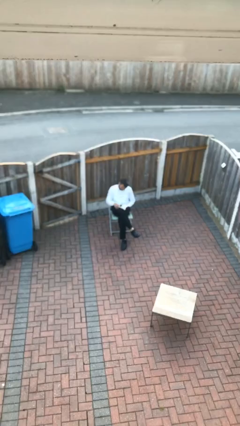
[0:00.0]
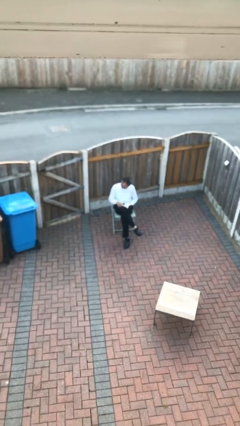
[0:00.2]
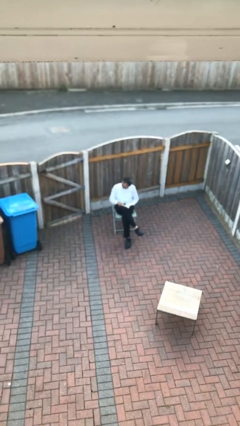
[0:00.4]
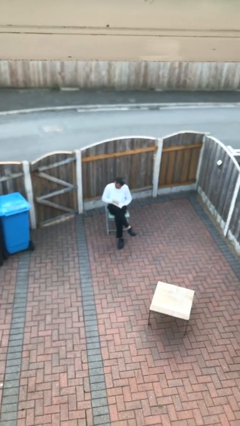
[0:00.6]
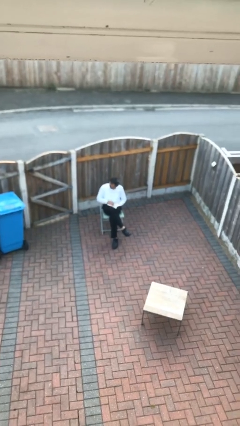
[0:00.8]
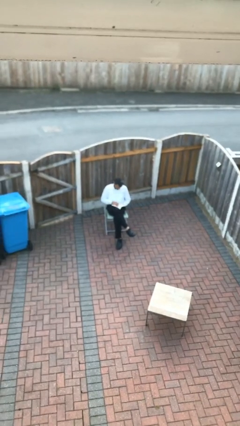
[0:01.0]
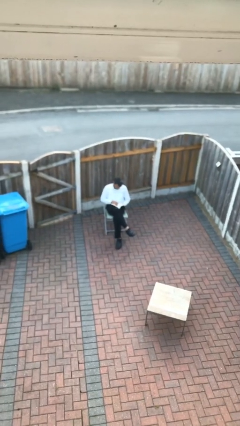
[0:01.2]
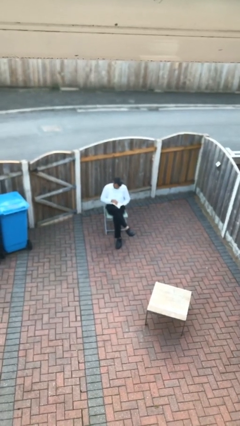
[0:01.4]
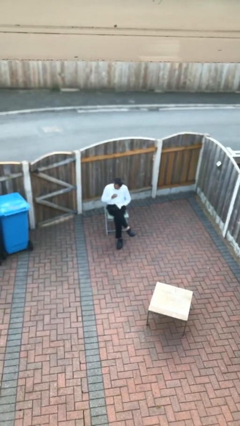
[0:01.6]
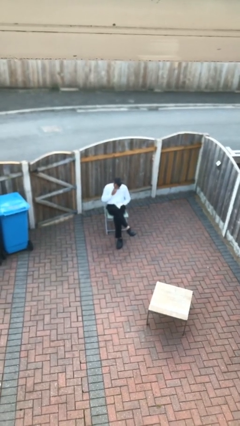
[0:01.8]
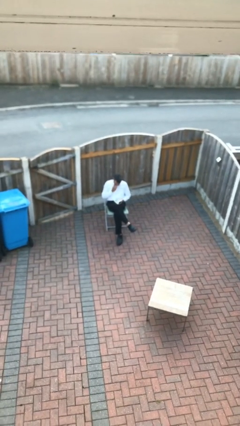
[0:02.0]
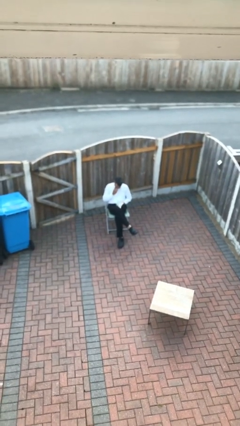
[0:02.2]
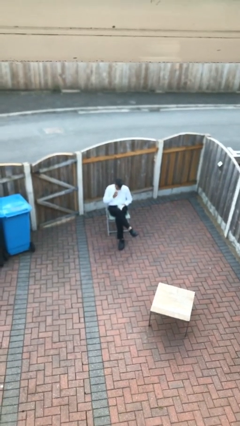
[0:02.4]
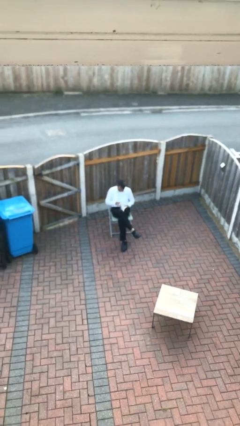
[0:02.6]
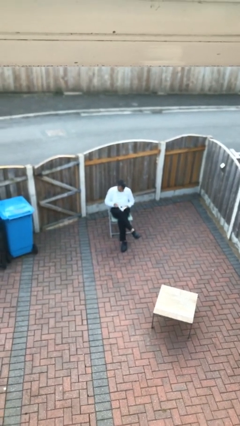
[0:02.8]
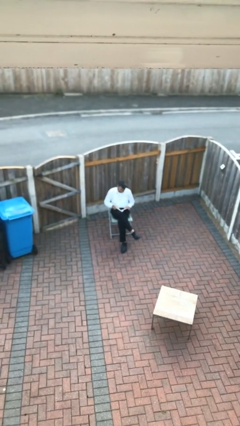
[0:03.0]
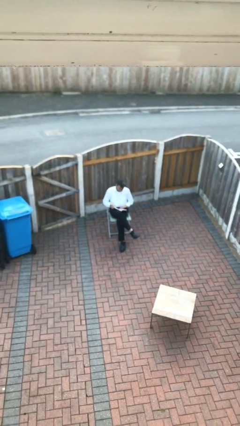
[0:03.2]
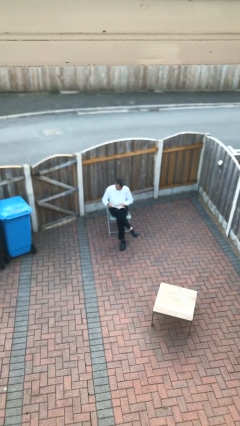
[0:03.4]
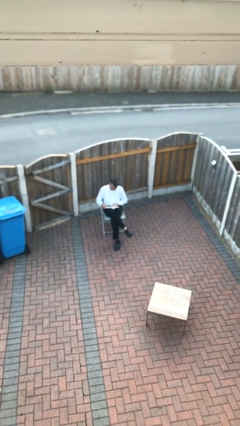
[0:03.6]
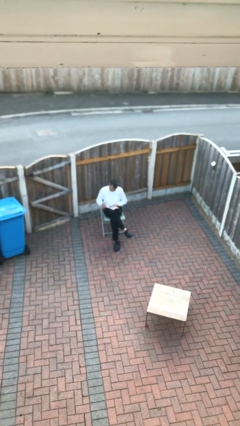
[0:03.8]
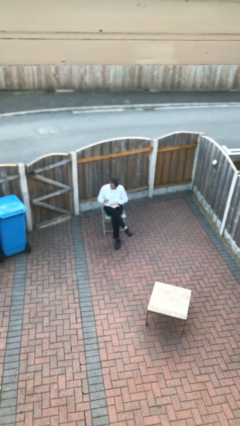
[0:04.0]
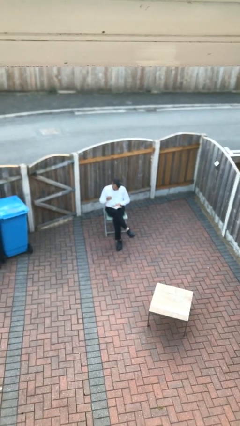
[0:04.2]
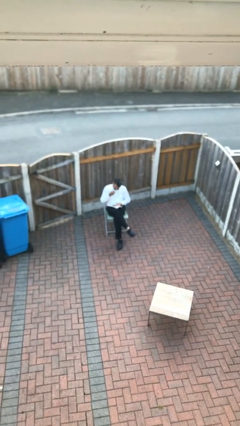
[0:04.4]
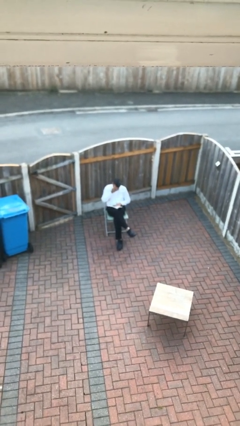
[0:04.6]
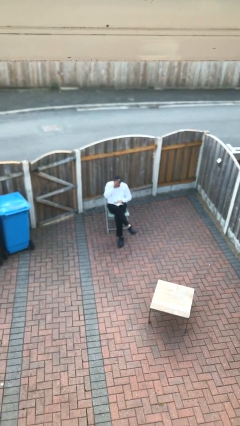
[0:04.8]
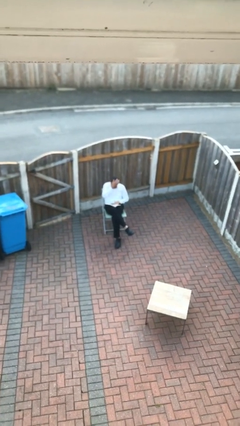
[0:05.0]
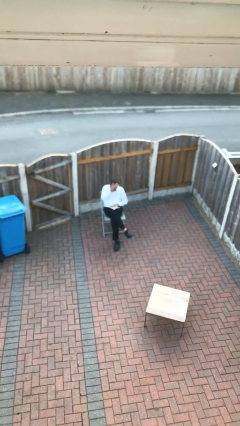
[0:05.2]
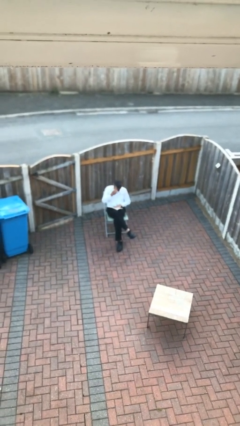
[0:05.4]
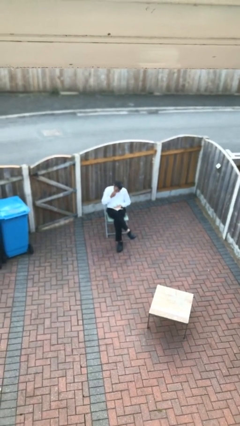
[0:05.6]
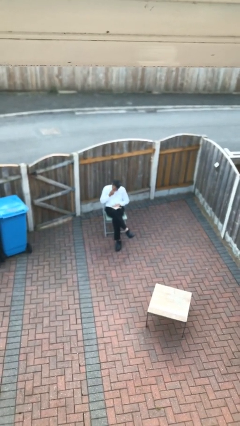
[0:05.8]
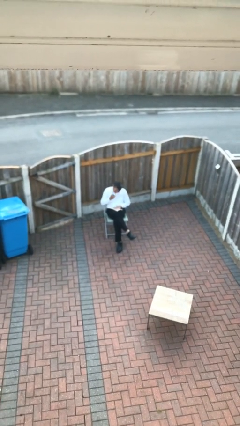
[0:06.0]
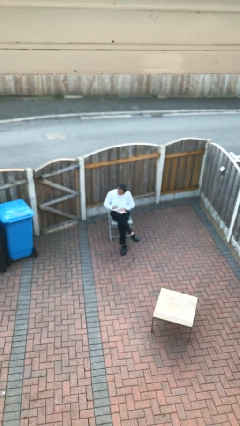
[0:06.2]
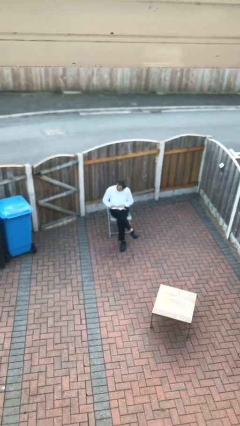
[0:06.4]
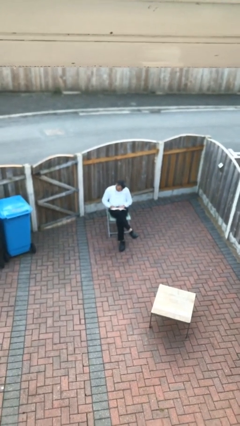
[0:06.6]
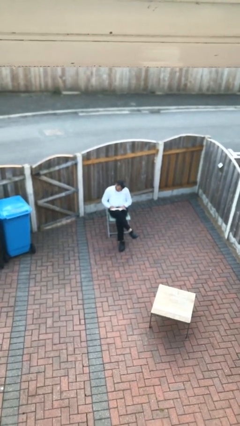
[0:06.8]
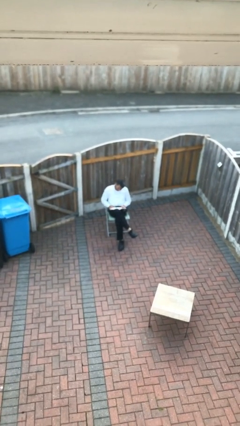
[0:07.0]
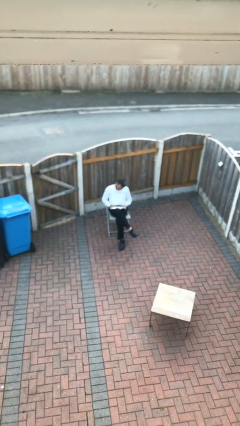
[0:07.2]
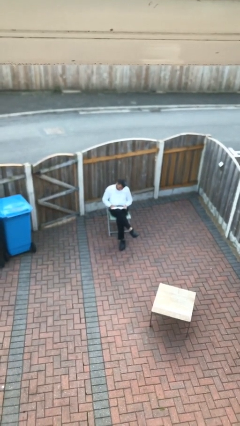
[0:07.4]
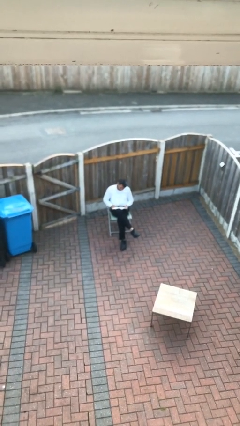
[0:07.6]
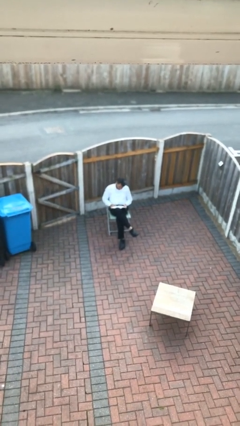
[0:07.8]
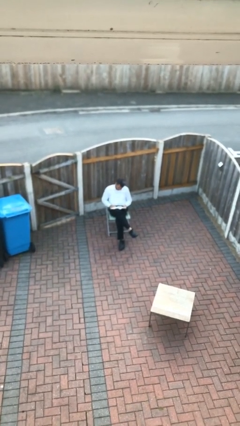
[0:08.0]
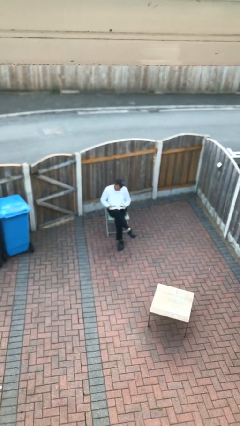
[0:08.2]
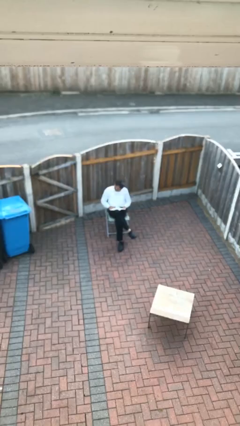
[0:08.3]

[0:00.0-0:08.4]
person reads document

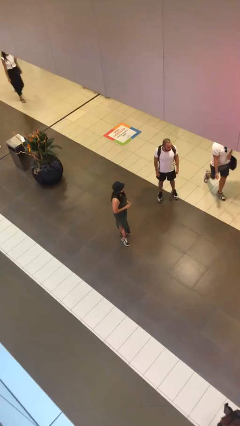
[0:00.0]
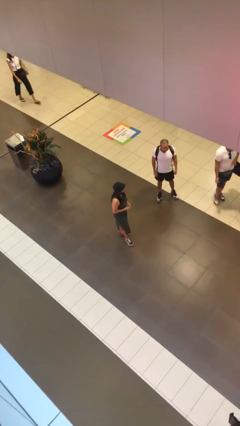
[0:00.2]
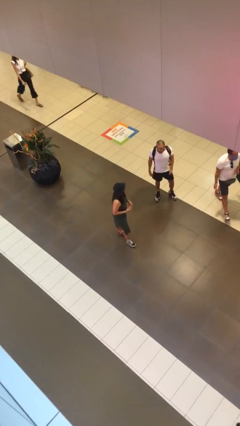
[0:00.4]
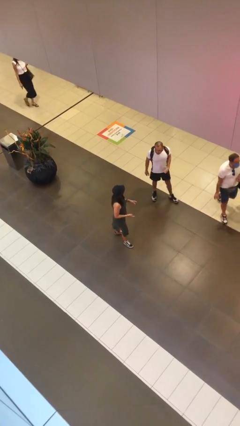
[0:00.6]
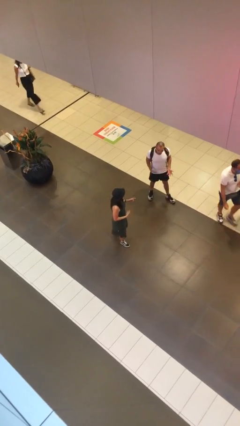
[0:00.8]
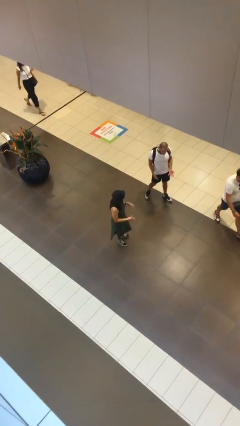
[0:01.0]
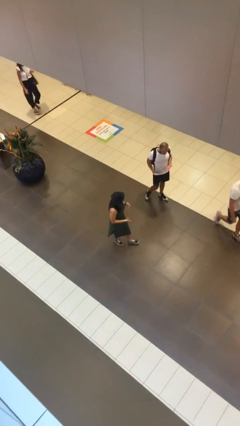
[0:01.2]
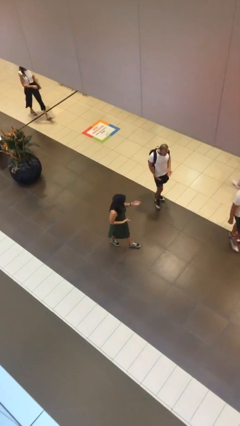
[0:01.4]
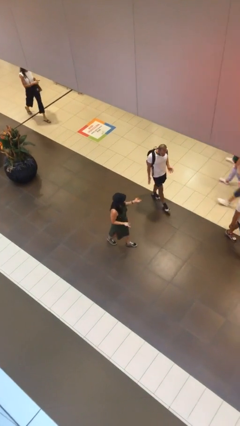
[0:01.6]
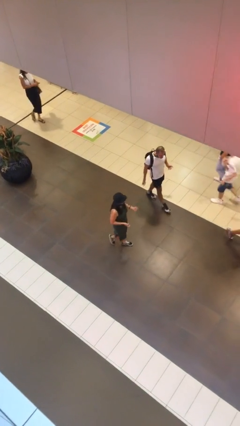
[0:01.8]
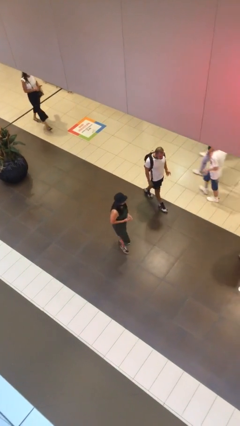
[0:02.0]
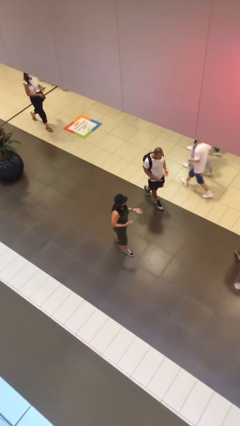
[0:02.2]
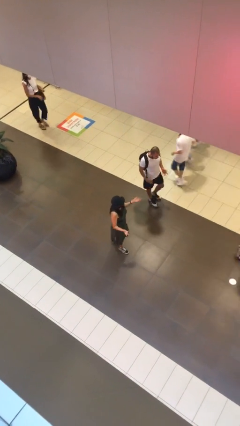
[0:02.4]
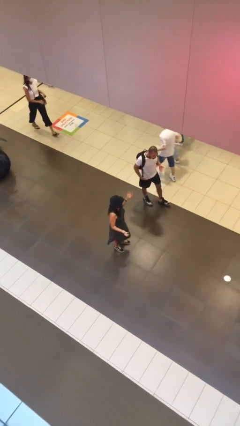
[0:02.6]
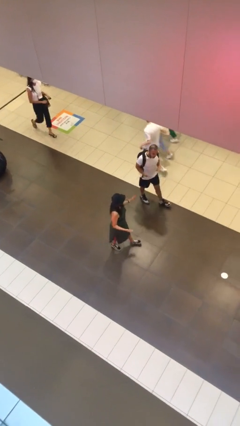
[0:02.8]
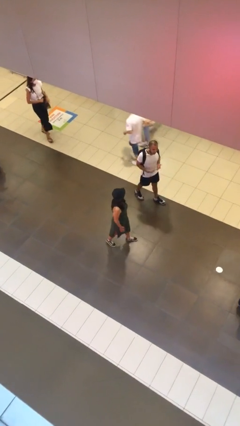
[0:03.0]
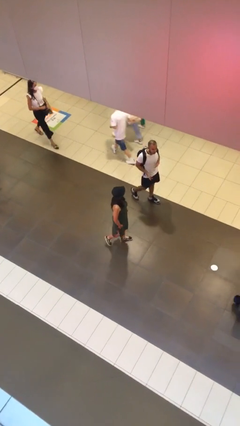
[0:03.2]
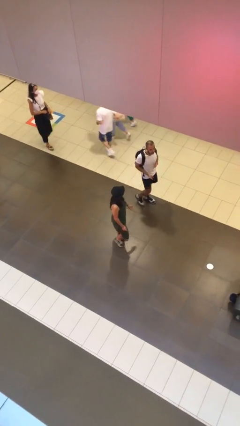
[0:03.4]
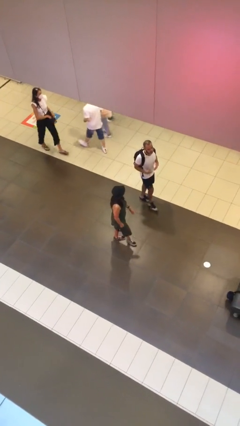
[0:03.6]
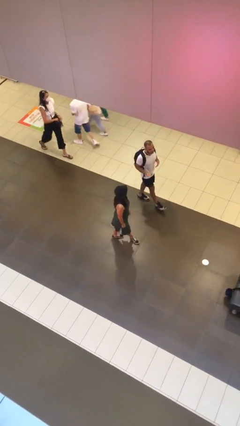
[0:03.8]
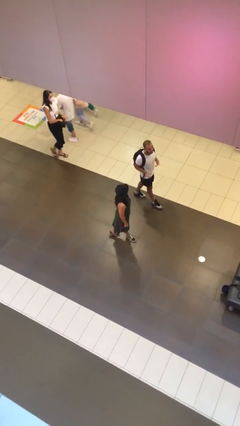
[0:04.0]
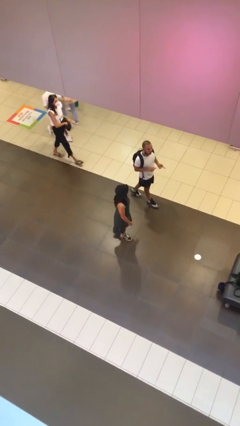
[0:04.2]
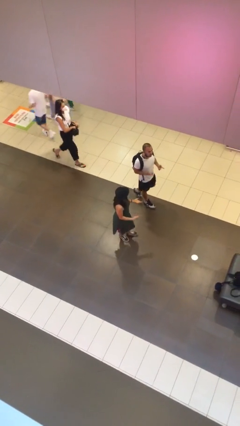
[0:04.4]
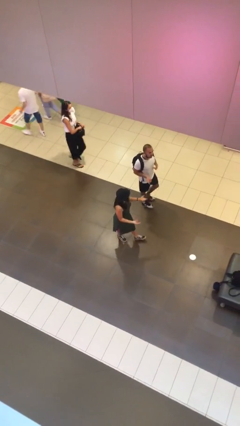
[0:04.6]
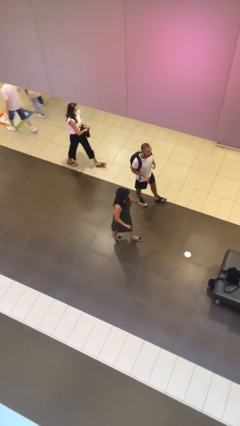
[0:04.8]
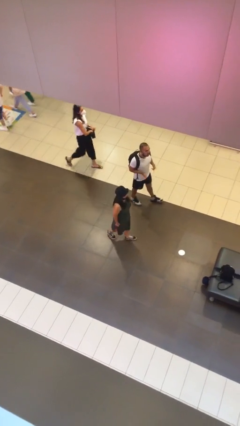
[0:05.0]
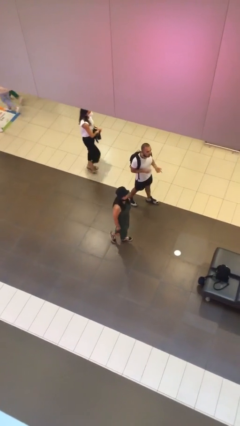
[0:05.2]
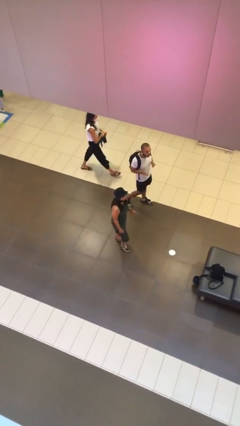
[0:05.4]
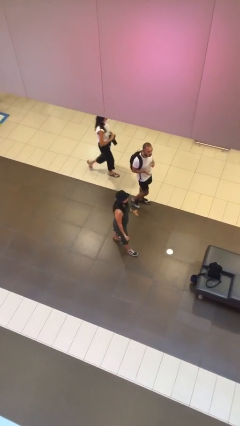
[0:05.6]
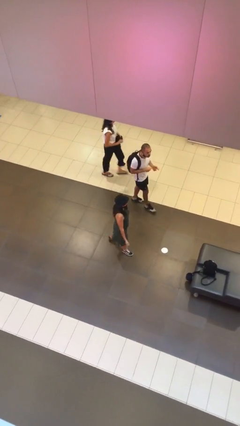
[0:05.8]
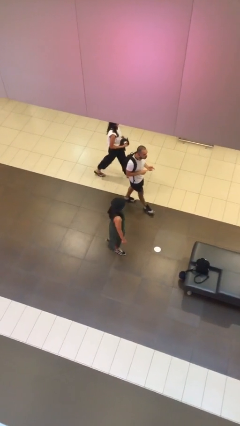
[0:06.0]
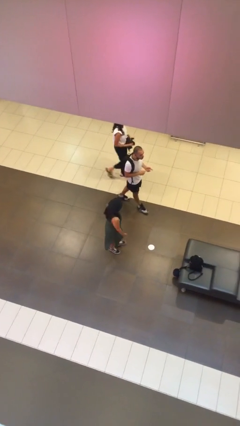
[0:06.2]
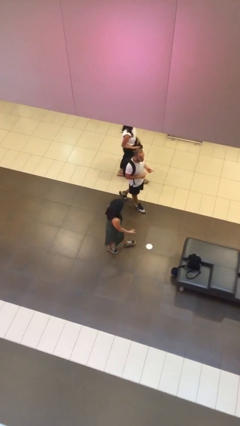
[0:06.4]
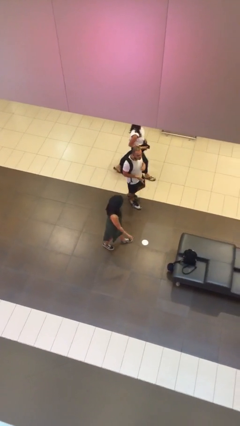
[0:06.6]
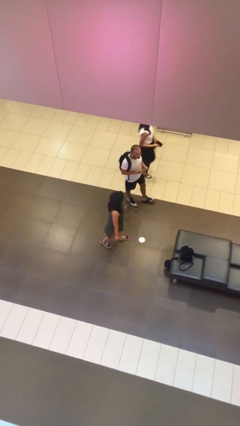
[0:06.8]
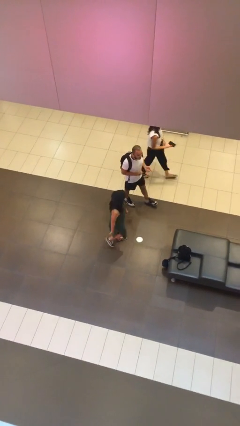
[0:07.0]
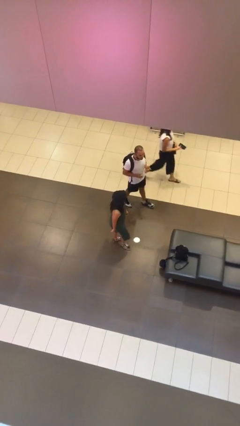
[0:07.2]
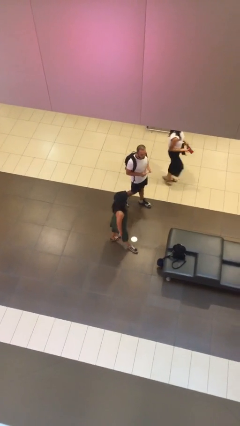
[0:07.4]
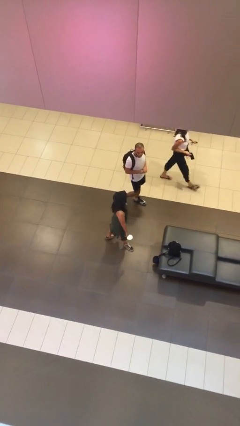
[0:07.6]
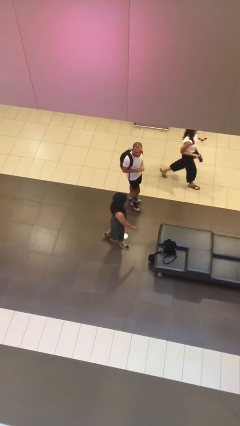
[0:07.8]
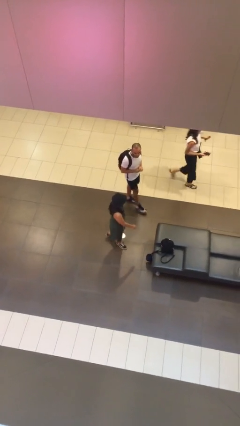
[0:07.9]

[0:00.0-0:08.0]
person talks to person

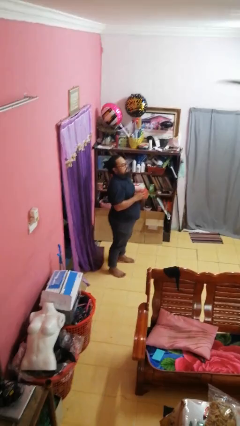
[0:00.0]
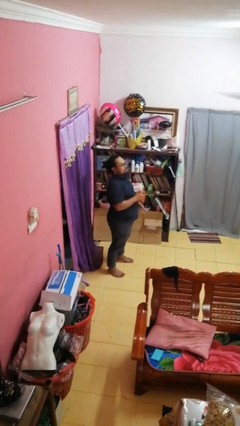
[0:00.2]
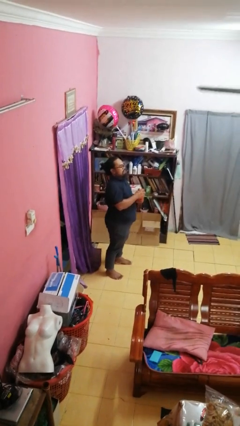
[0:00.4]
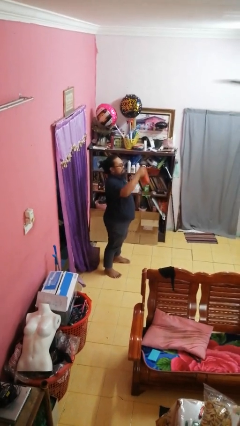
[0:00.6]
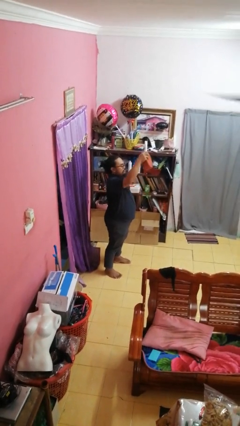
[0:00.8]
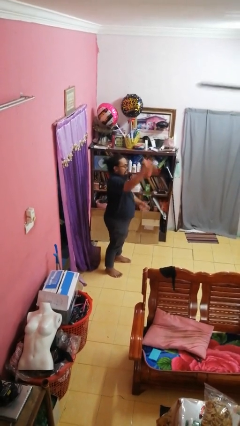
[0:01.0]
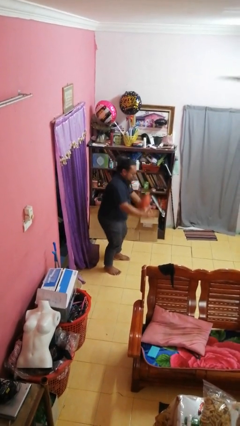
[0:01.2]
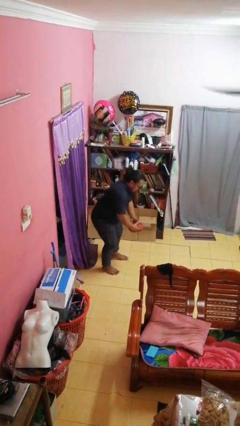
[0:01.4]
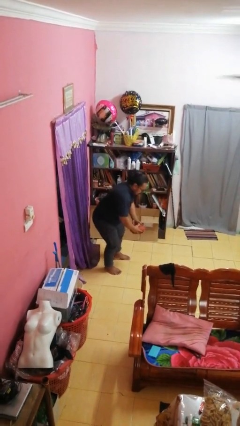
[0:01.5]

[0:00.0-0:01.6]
person drops object
